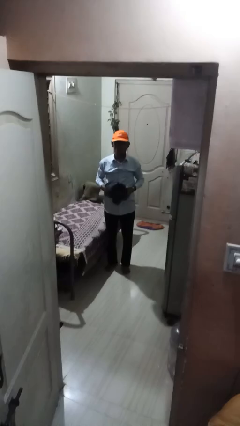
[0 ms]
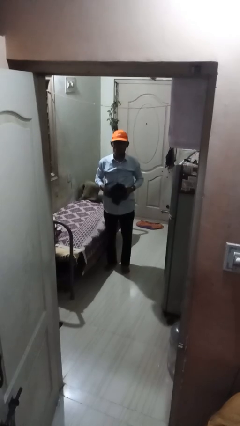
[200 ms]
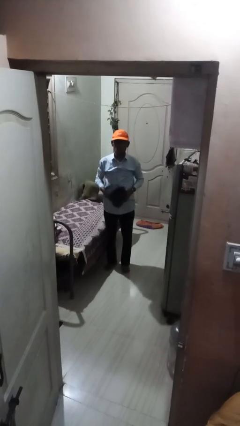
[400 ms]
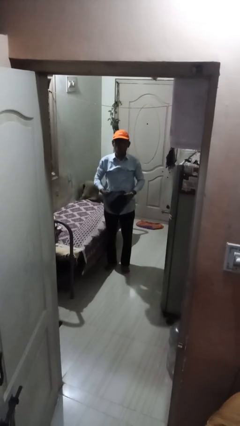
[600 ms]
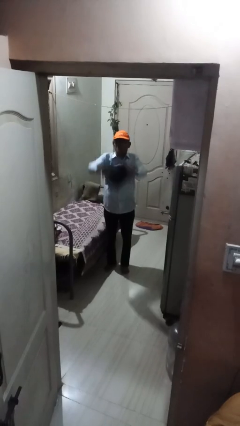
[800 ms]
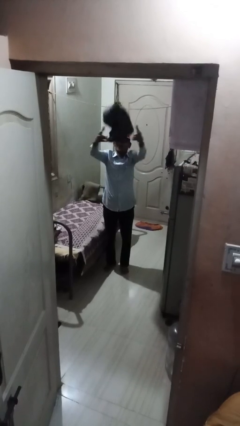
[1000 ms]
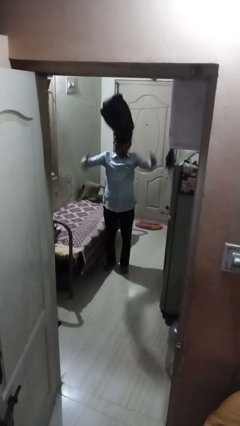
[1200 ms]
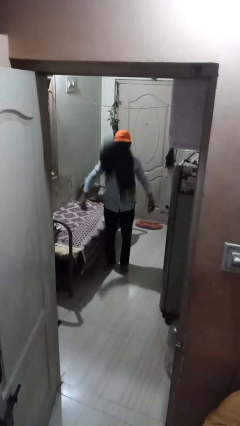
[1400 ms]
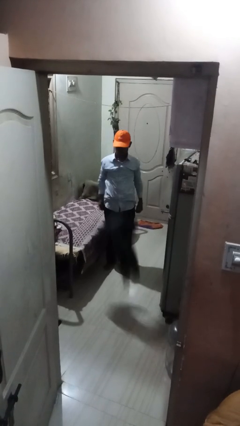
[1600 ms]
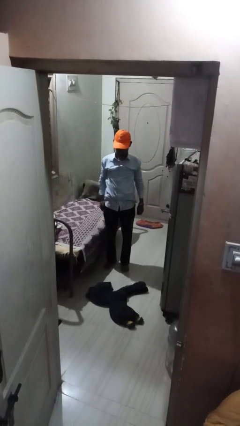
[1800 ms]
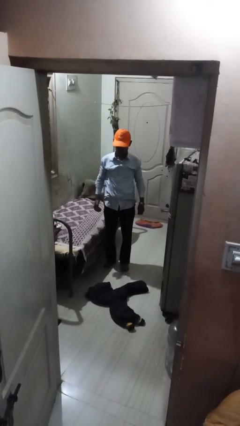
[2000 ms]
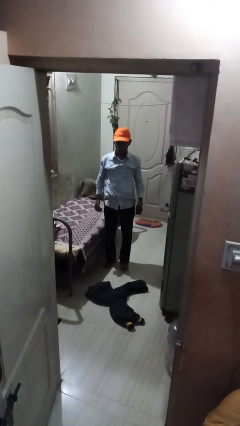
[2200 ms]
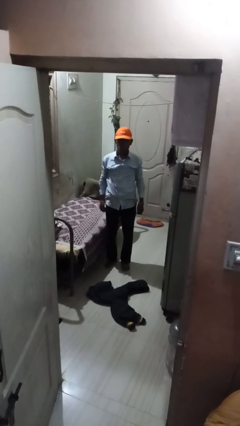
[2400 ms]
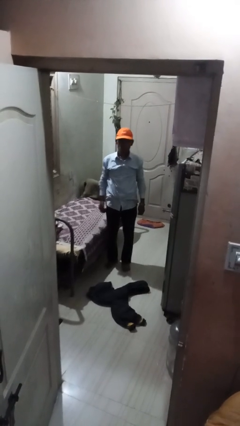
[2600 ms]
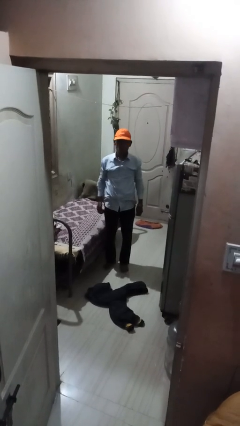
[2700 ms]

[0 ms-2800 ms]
person throws object into air

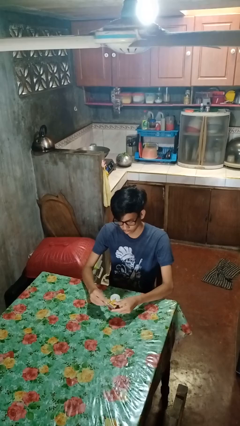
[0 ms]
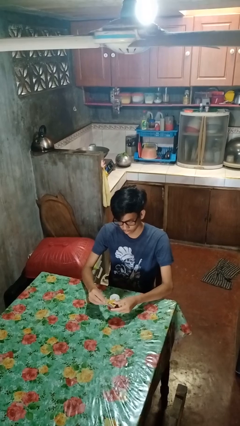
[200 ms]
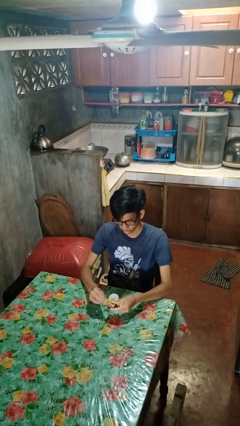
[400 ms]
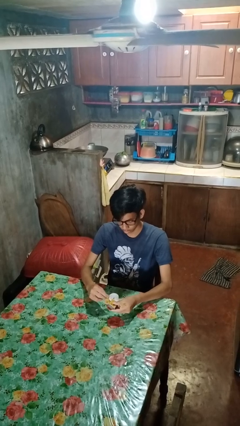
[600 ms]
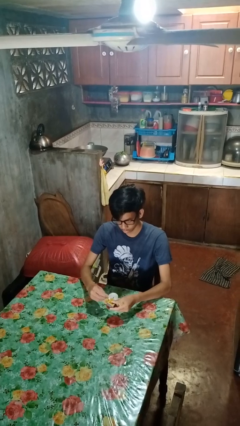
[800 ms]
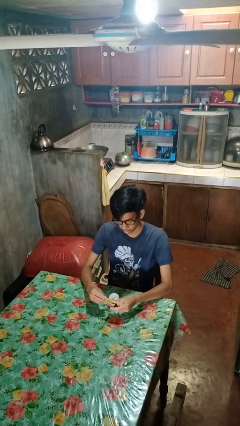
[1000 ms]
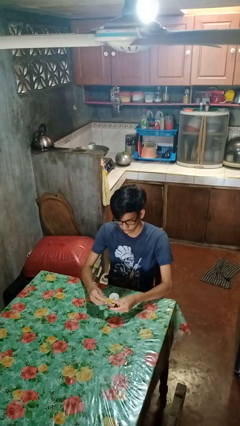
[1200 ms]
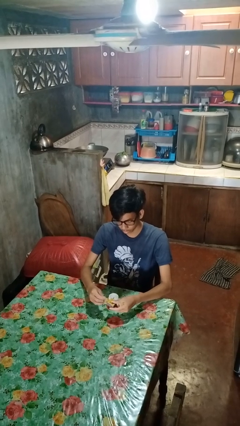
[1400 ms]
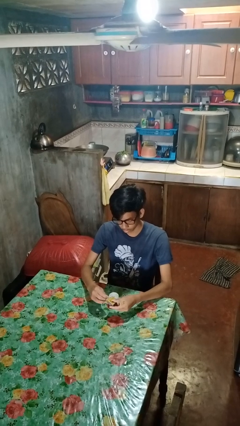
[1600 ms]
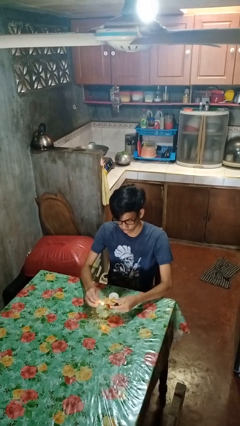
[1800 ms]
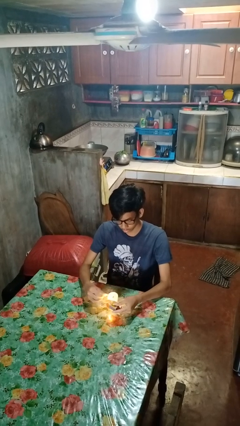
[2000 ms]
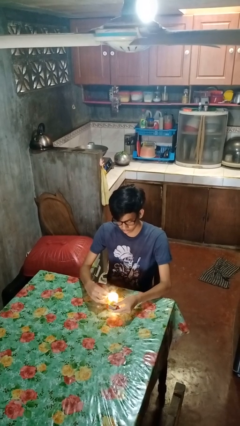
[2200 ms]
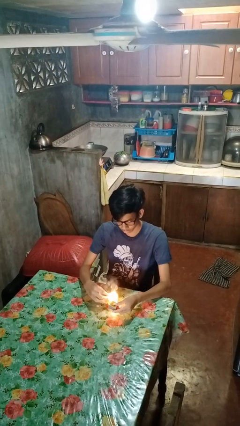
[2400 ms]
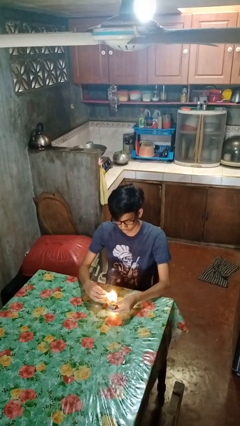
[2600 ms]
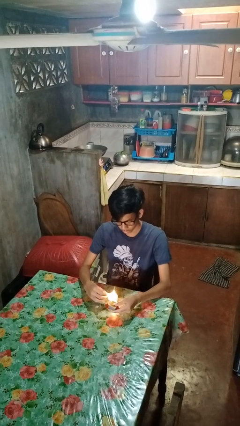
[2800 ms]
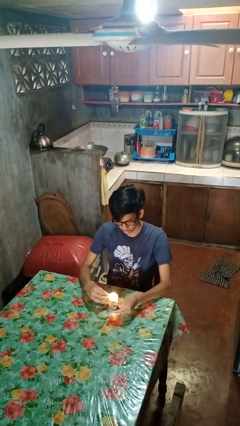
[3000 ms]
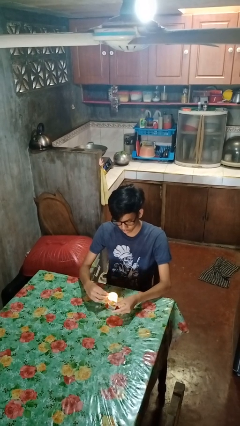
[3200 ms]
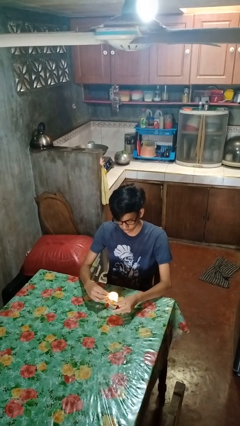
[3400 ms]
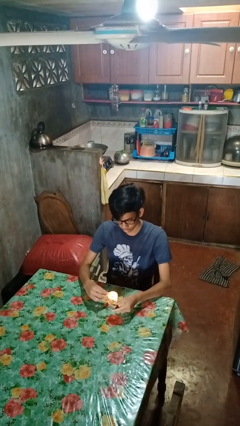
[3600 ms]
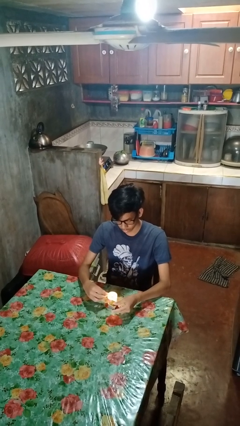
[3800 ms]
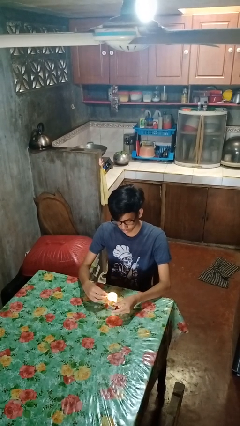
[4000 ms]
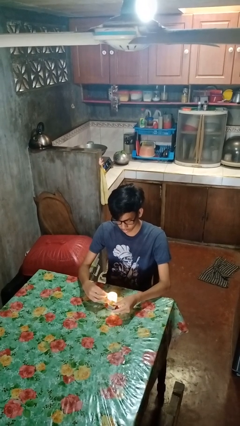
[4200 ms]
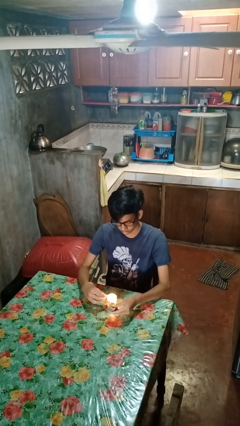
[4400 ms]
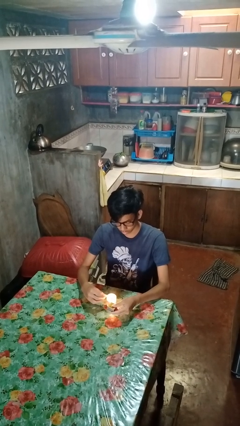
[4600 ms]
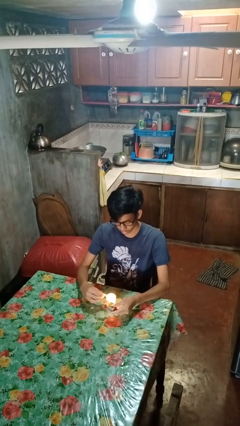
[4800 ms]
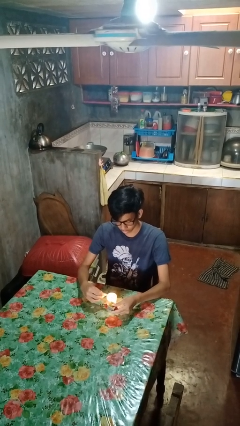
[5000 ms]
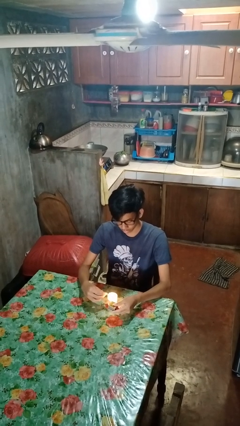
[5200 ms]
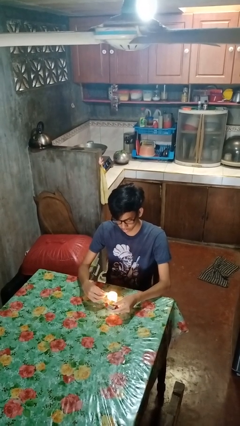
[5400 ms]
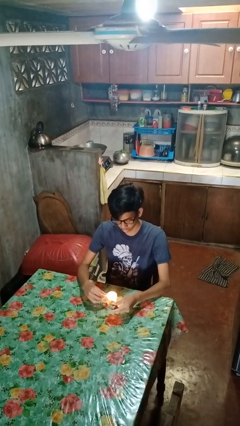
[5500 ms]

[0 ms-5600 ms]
person lights candle

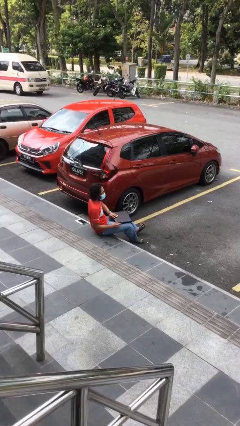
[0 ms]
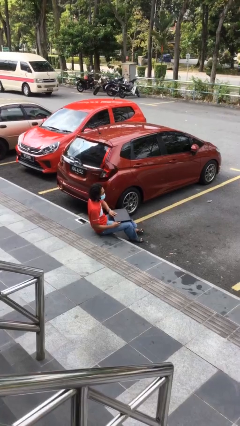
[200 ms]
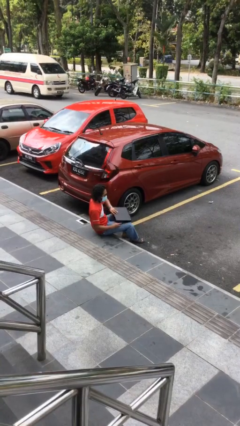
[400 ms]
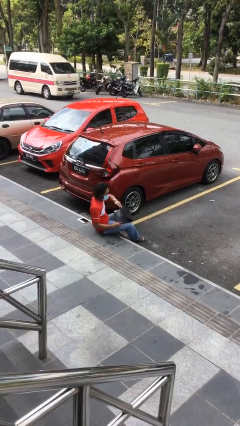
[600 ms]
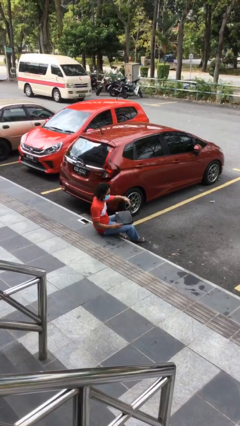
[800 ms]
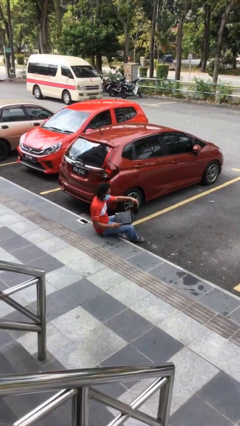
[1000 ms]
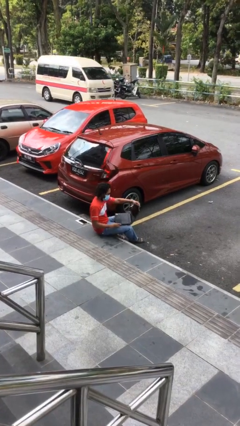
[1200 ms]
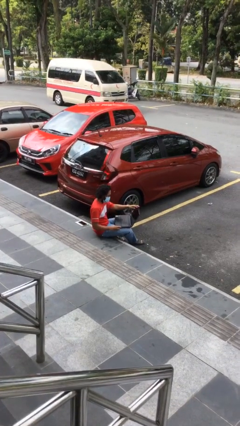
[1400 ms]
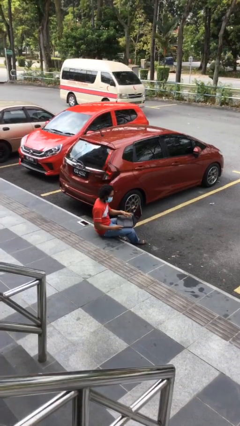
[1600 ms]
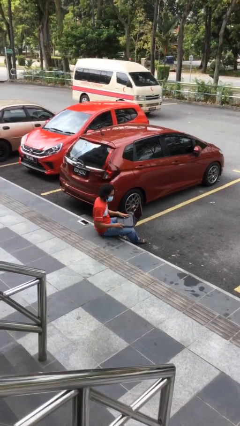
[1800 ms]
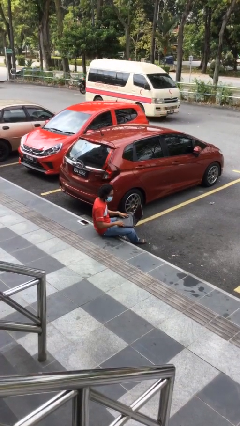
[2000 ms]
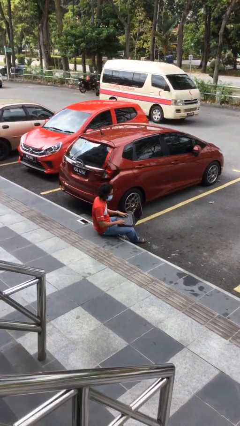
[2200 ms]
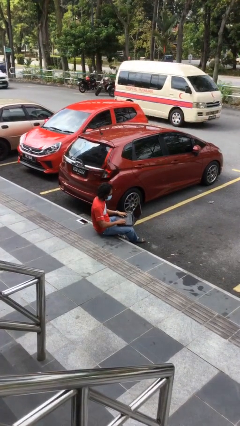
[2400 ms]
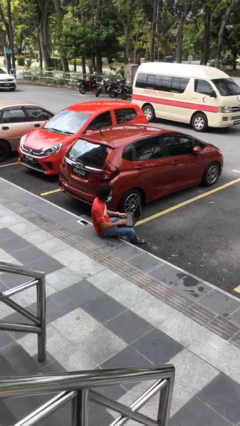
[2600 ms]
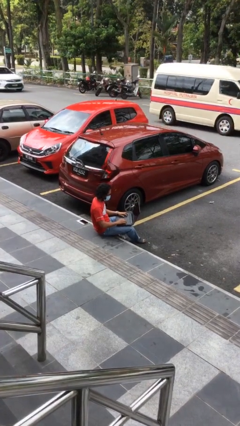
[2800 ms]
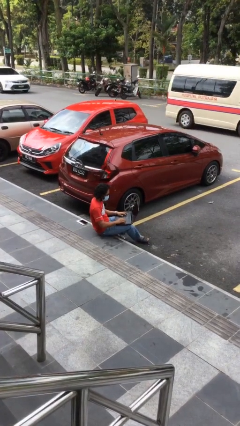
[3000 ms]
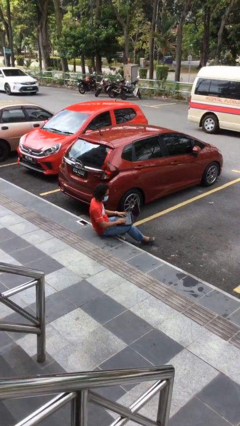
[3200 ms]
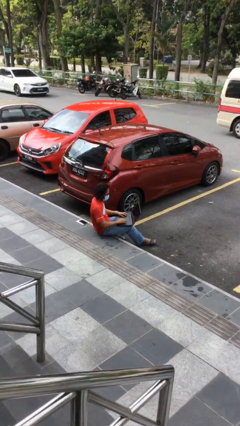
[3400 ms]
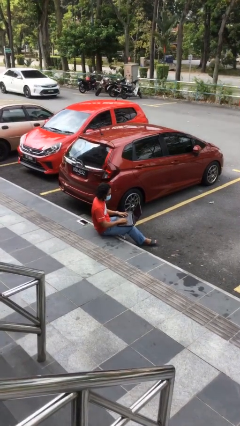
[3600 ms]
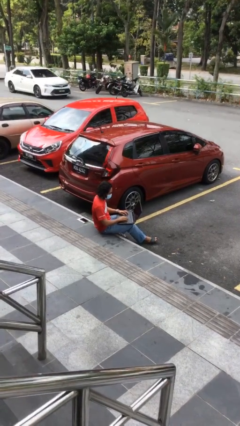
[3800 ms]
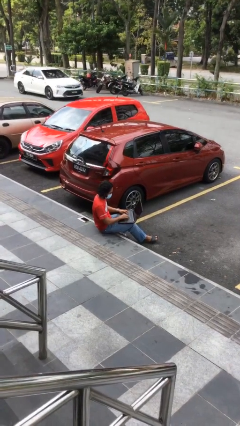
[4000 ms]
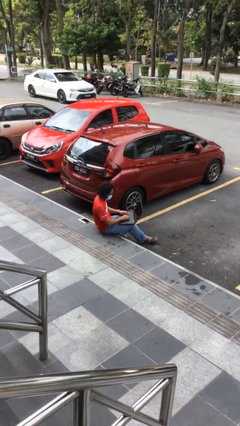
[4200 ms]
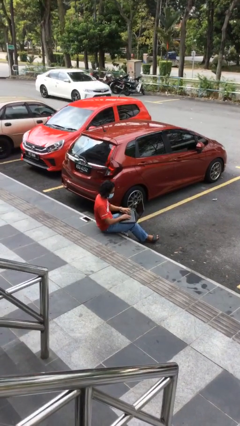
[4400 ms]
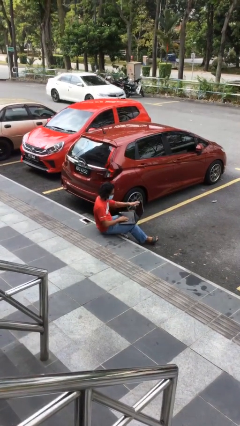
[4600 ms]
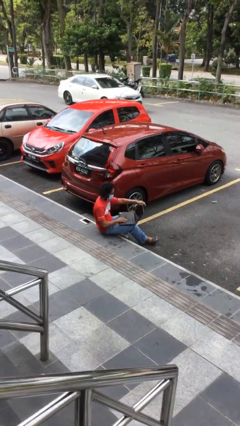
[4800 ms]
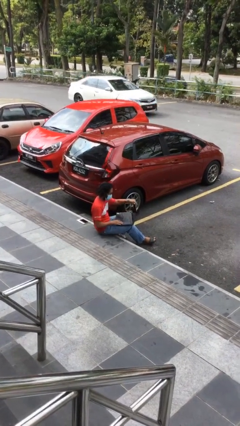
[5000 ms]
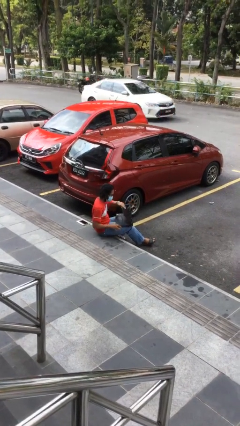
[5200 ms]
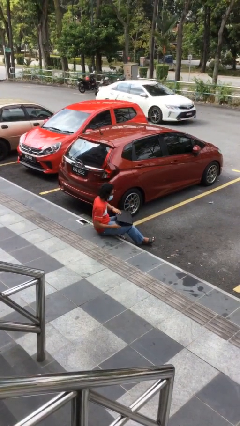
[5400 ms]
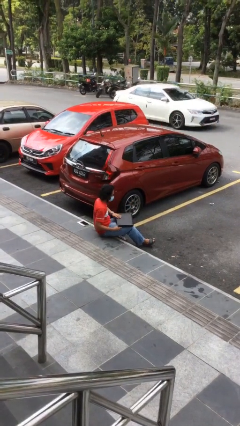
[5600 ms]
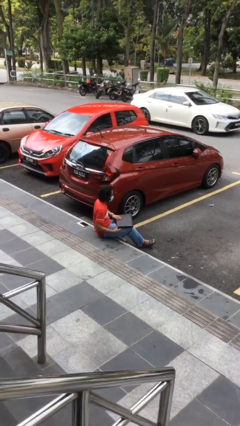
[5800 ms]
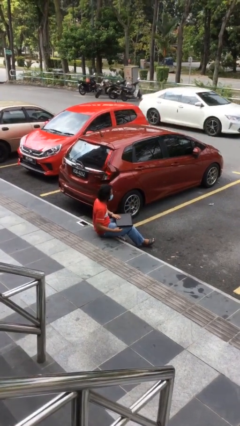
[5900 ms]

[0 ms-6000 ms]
person interacts with laptop

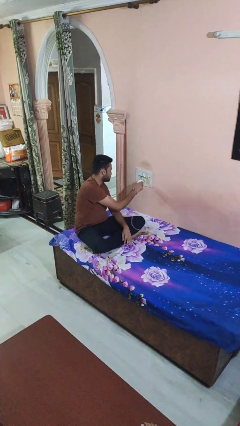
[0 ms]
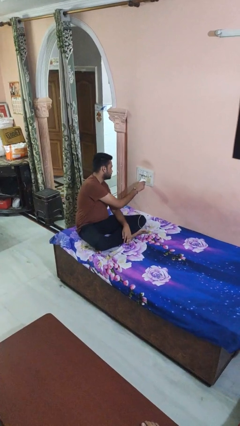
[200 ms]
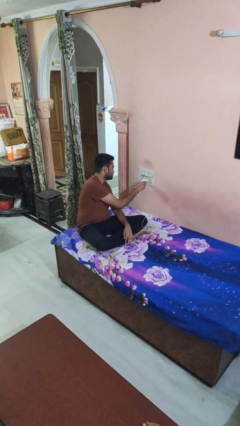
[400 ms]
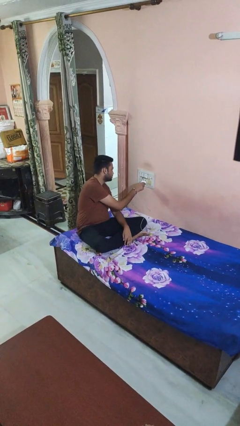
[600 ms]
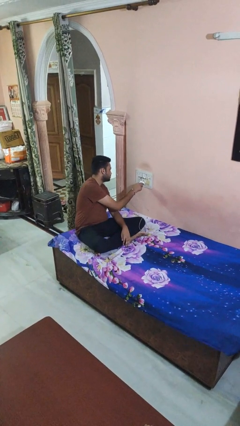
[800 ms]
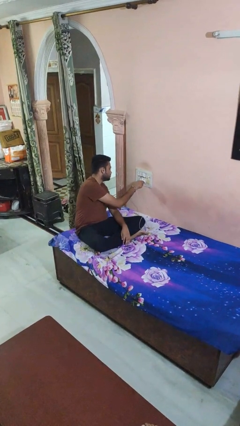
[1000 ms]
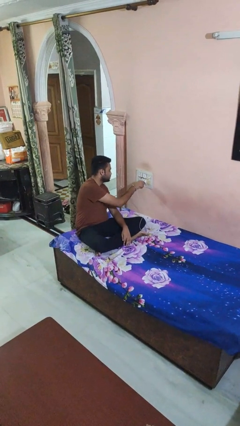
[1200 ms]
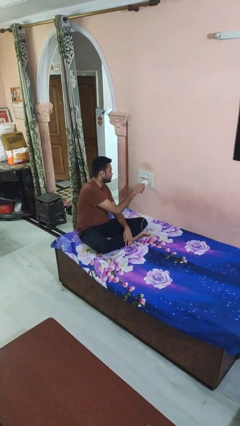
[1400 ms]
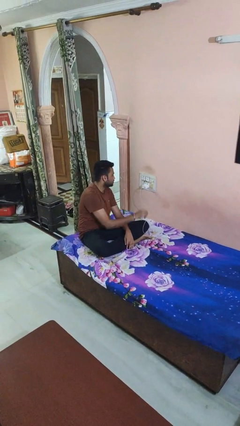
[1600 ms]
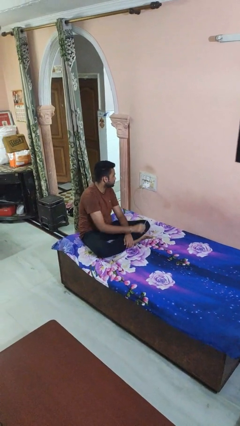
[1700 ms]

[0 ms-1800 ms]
person plugs into electrical socket

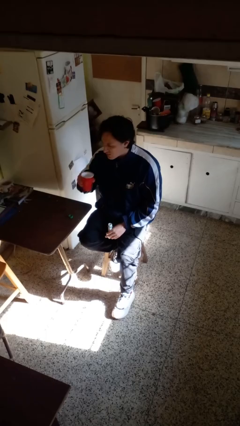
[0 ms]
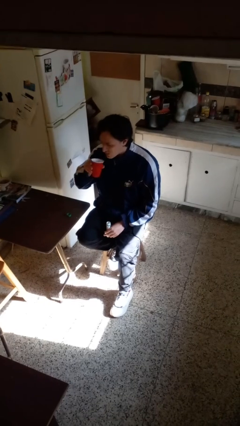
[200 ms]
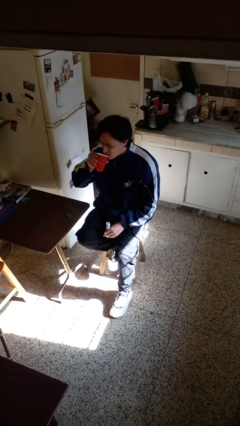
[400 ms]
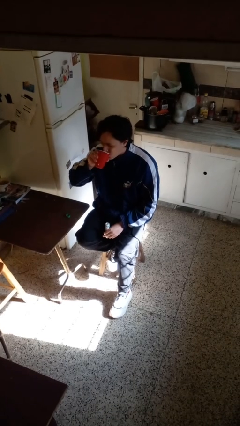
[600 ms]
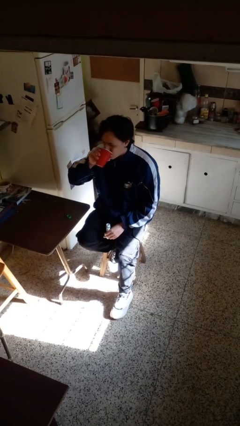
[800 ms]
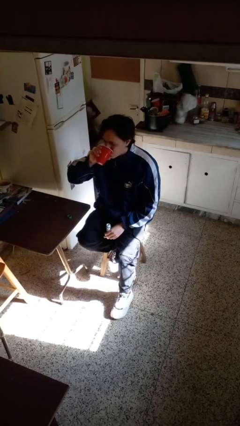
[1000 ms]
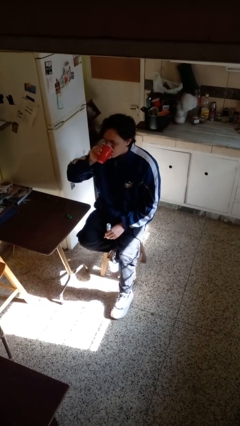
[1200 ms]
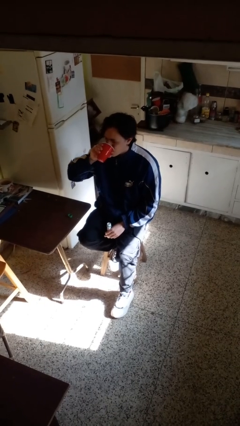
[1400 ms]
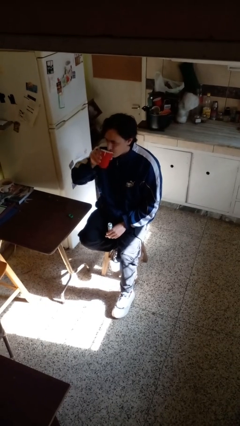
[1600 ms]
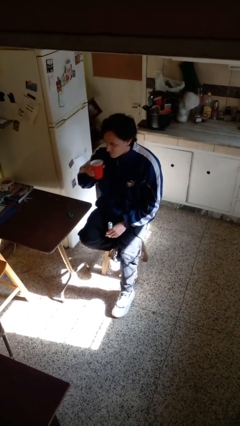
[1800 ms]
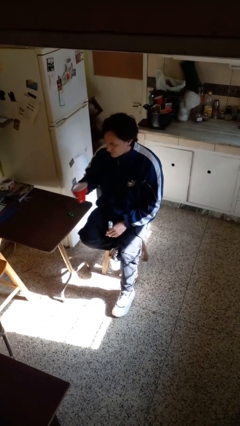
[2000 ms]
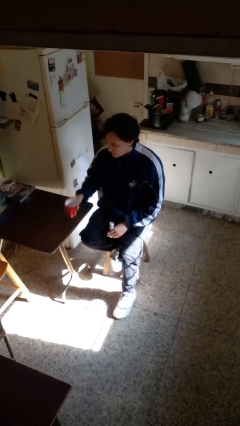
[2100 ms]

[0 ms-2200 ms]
person drinks from cup
